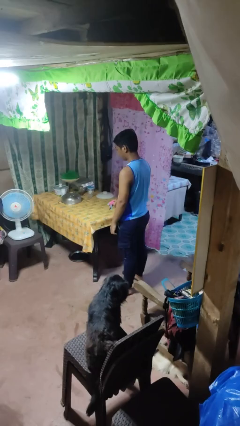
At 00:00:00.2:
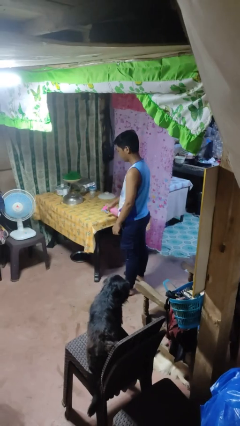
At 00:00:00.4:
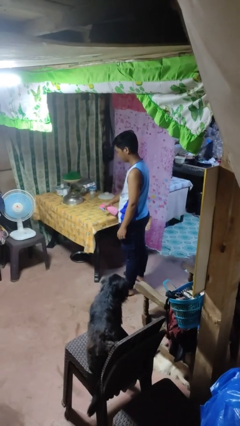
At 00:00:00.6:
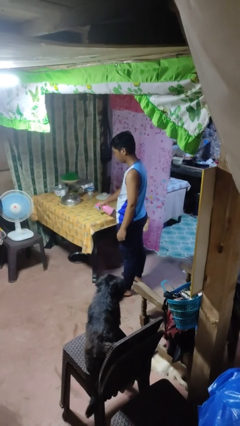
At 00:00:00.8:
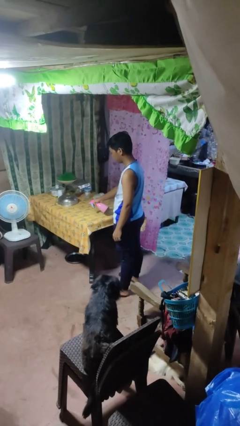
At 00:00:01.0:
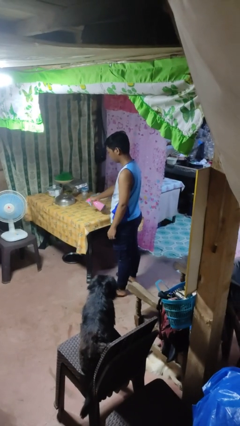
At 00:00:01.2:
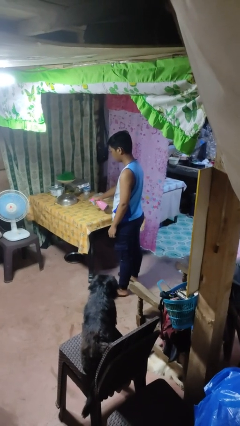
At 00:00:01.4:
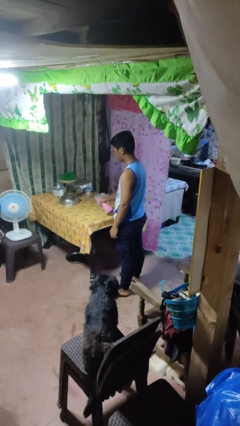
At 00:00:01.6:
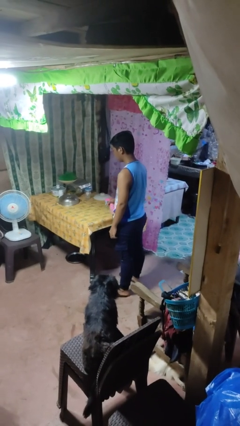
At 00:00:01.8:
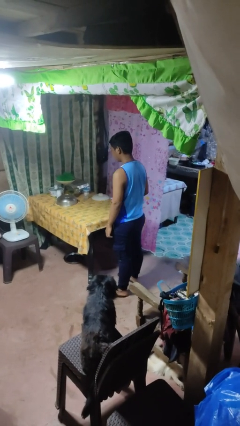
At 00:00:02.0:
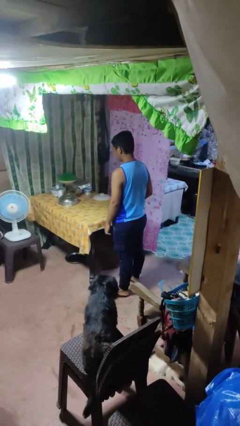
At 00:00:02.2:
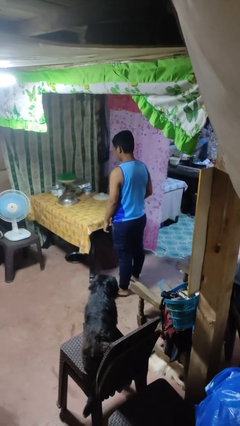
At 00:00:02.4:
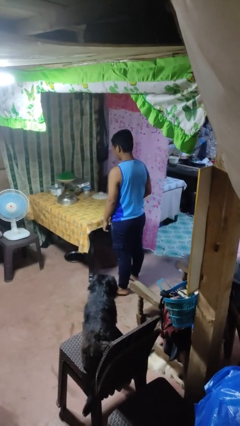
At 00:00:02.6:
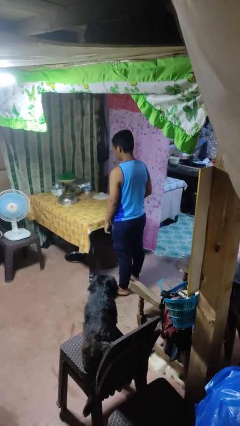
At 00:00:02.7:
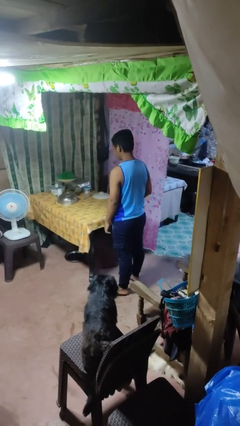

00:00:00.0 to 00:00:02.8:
person sprays from bottle

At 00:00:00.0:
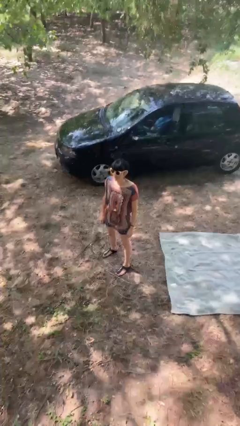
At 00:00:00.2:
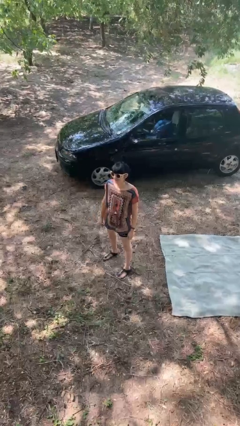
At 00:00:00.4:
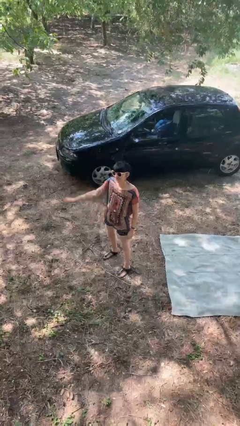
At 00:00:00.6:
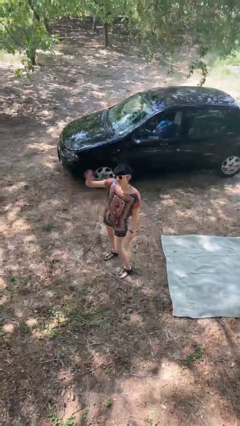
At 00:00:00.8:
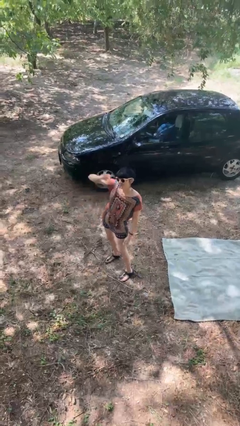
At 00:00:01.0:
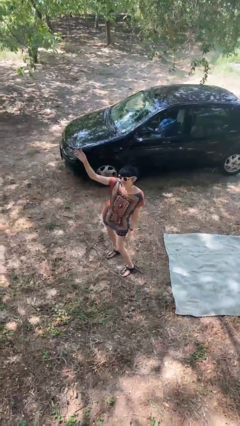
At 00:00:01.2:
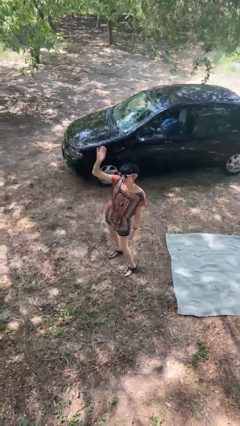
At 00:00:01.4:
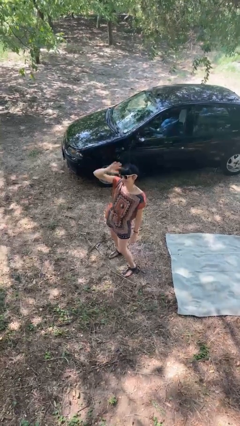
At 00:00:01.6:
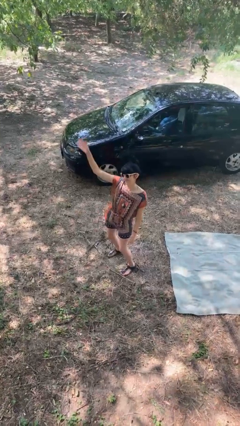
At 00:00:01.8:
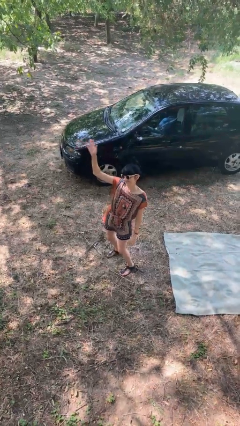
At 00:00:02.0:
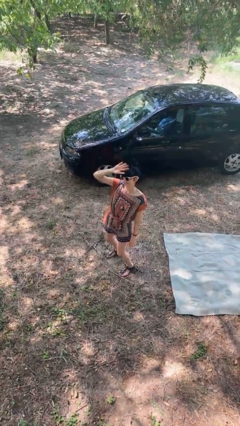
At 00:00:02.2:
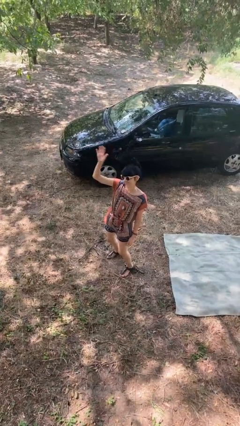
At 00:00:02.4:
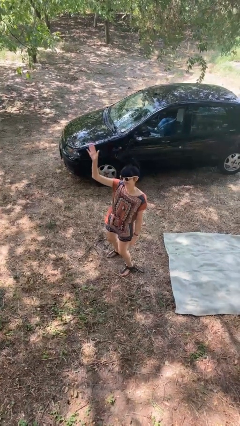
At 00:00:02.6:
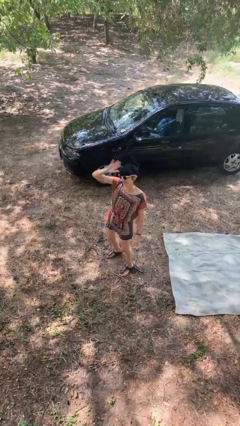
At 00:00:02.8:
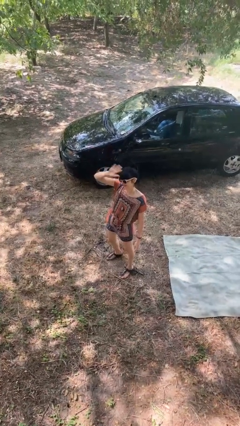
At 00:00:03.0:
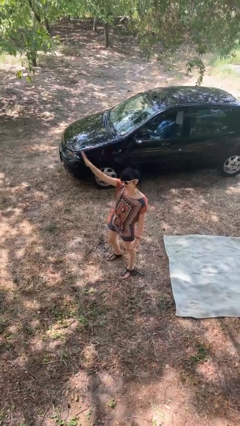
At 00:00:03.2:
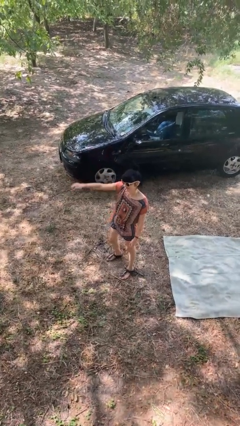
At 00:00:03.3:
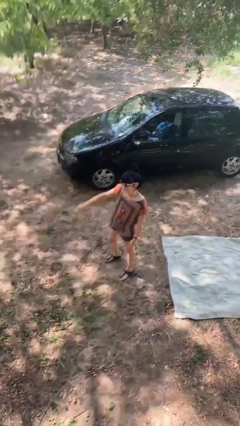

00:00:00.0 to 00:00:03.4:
person waves at person

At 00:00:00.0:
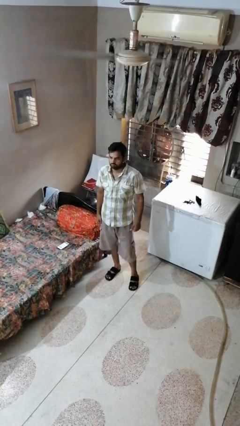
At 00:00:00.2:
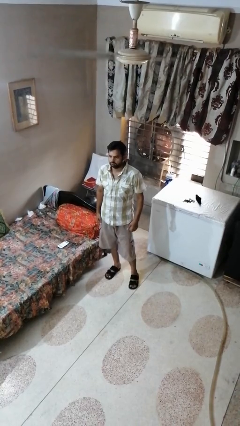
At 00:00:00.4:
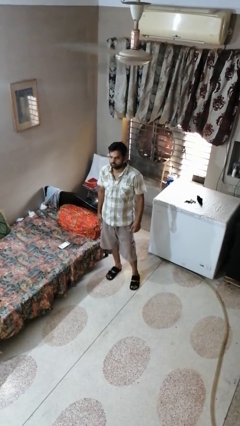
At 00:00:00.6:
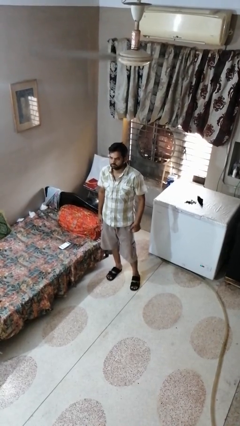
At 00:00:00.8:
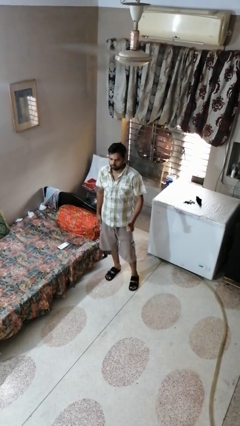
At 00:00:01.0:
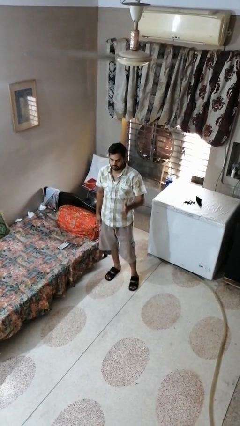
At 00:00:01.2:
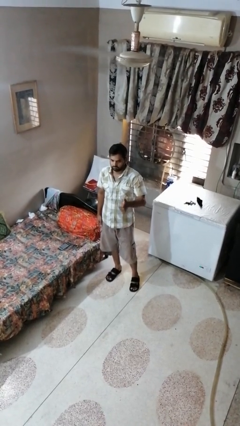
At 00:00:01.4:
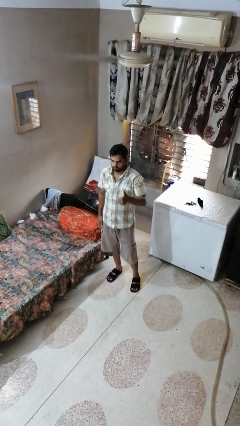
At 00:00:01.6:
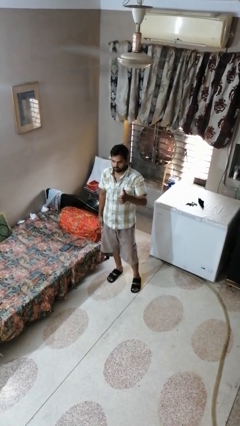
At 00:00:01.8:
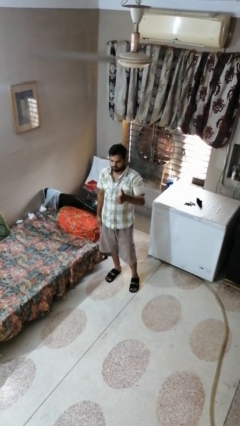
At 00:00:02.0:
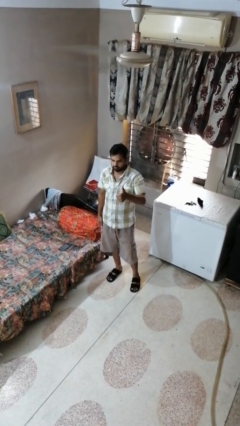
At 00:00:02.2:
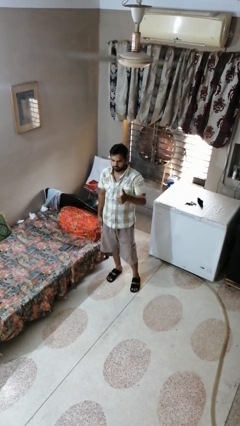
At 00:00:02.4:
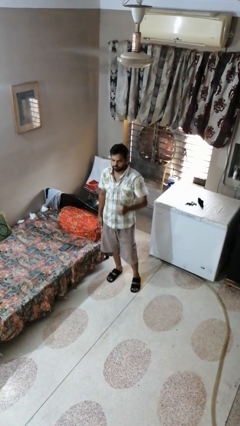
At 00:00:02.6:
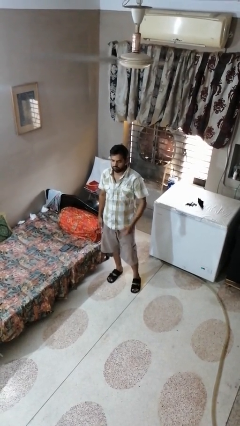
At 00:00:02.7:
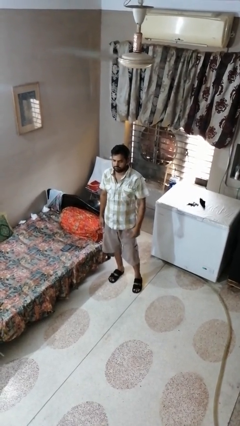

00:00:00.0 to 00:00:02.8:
person gestures thumbs up

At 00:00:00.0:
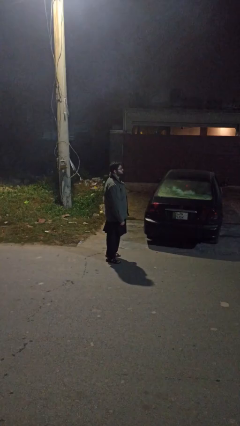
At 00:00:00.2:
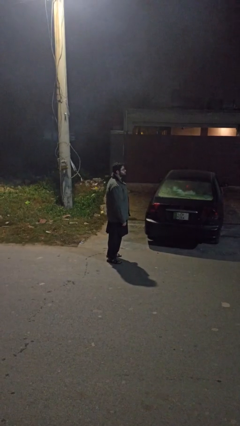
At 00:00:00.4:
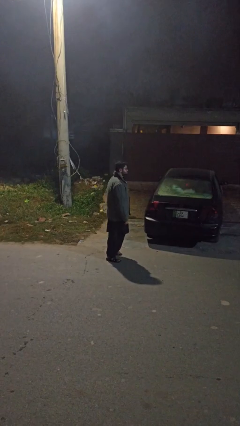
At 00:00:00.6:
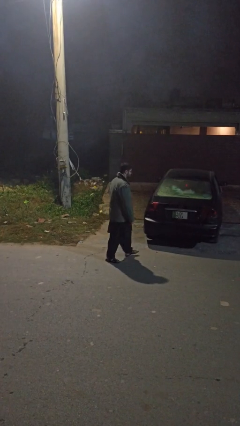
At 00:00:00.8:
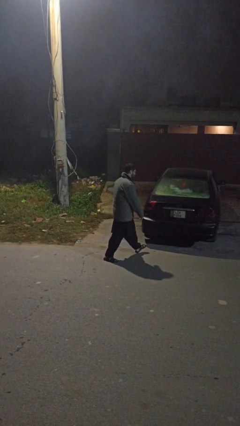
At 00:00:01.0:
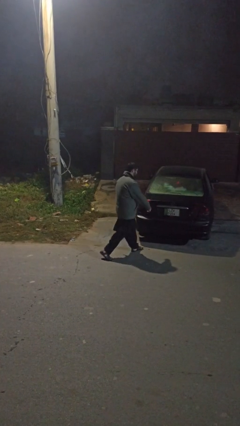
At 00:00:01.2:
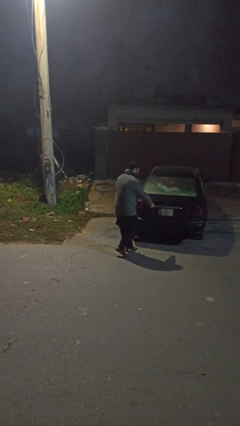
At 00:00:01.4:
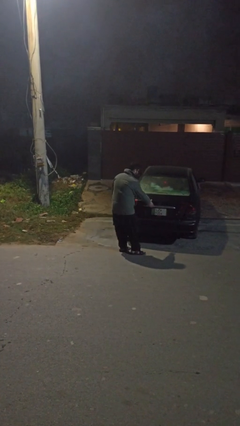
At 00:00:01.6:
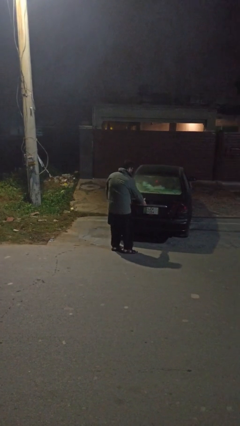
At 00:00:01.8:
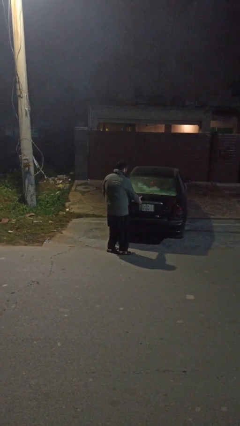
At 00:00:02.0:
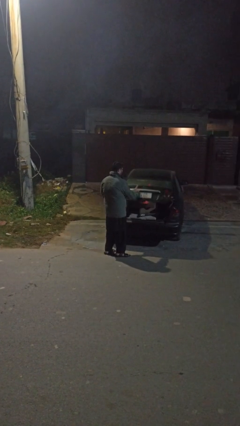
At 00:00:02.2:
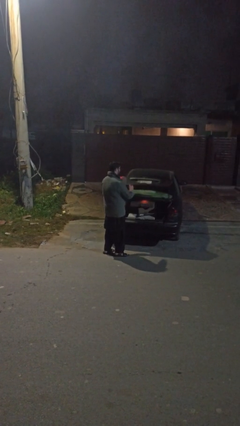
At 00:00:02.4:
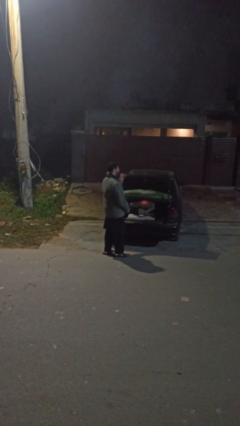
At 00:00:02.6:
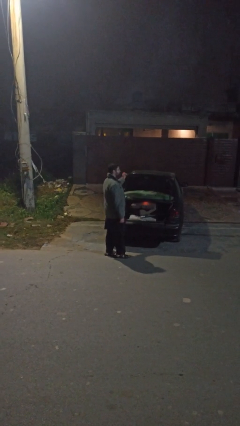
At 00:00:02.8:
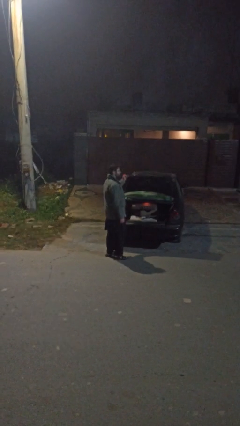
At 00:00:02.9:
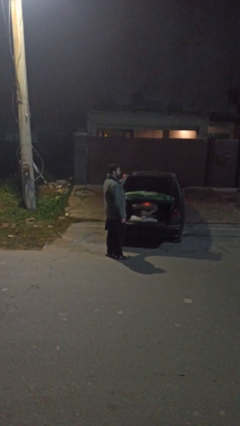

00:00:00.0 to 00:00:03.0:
person opens car trunk

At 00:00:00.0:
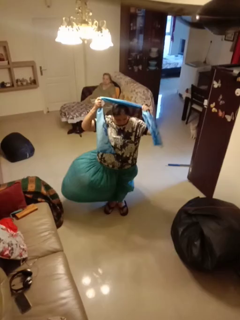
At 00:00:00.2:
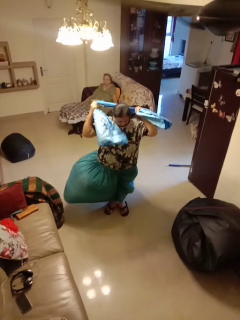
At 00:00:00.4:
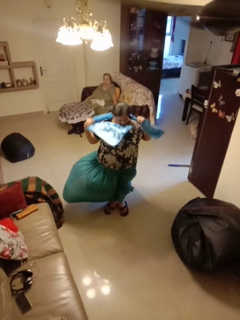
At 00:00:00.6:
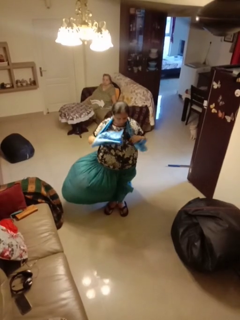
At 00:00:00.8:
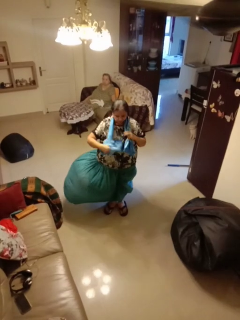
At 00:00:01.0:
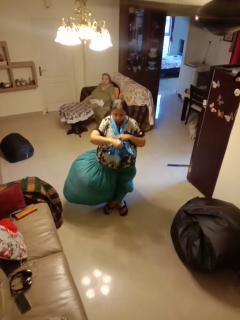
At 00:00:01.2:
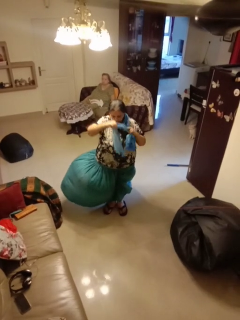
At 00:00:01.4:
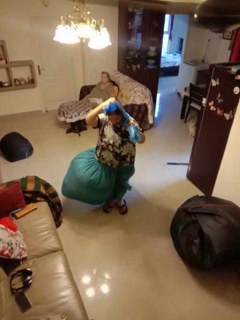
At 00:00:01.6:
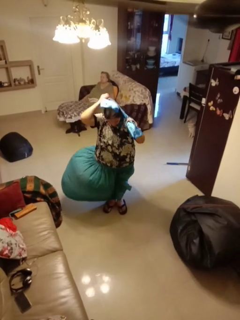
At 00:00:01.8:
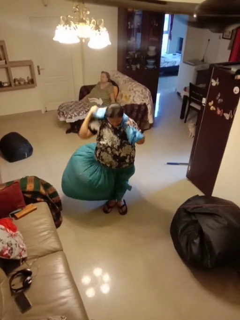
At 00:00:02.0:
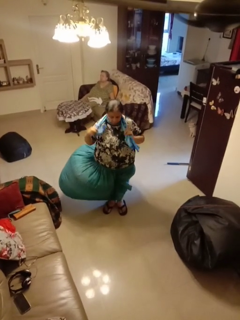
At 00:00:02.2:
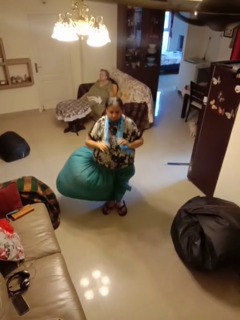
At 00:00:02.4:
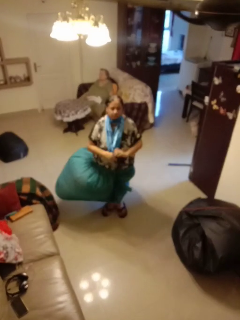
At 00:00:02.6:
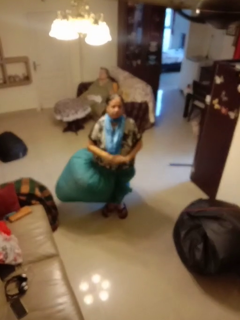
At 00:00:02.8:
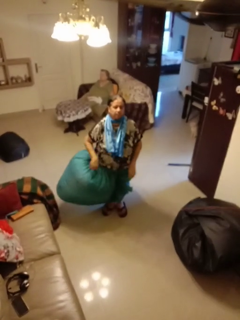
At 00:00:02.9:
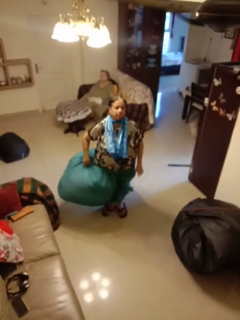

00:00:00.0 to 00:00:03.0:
person puts on scarf

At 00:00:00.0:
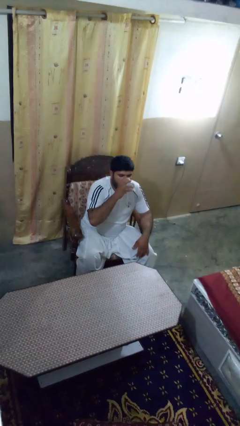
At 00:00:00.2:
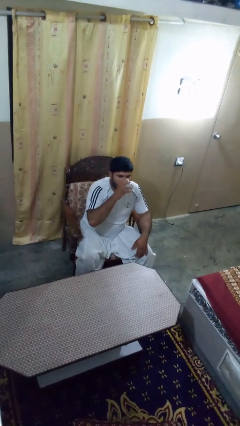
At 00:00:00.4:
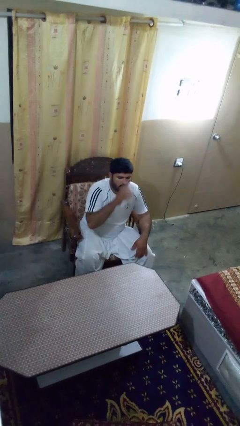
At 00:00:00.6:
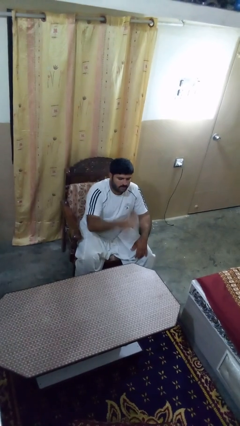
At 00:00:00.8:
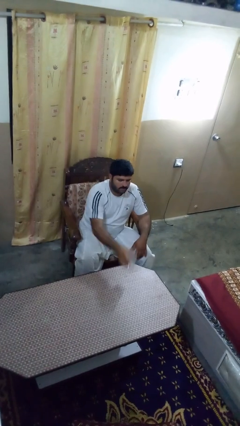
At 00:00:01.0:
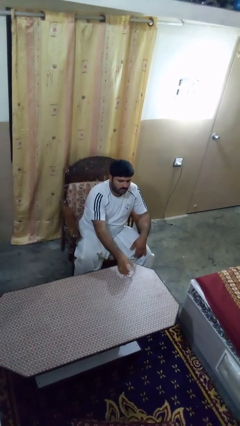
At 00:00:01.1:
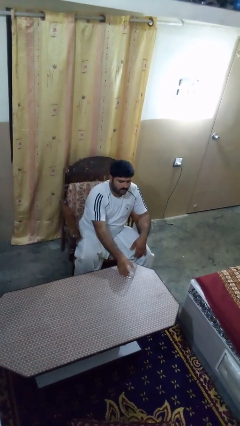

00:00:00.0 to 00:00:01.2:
person puts down object on table

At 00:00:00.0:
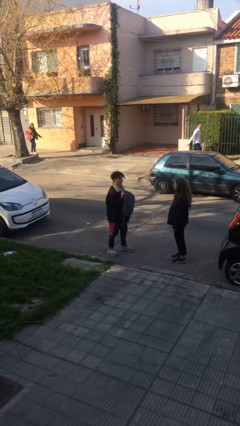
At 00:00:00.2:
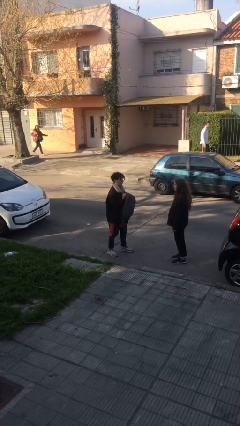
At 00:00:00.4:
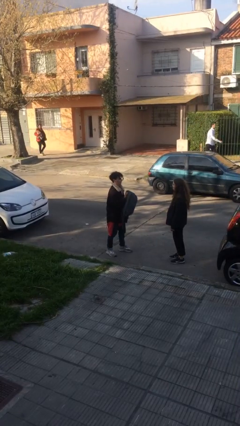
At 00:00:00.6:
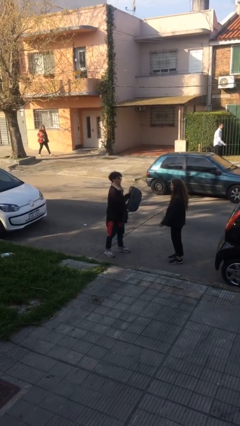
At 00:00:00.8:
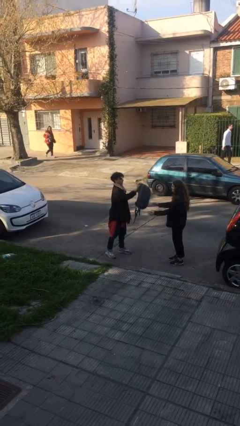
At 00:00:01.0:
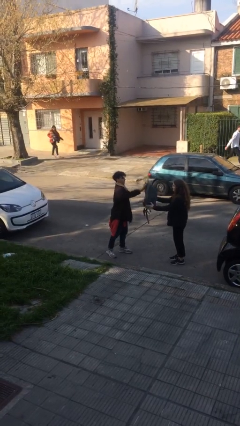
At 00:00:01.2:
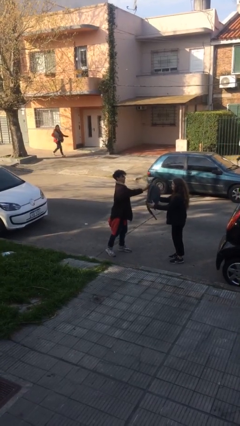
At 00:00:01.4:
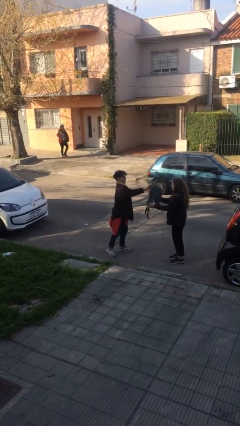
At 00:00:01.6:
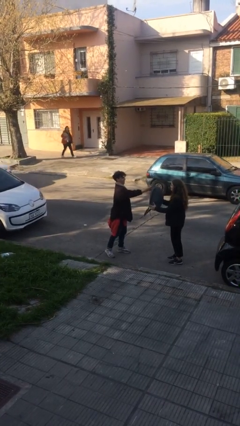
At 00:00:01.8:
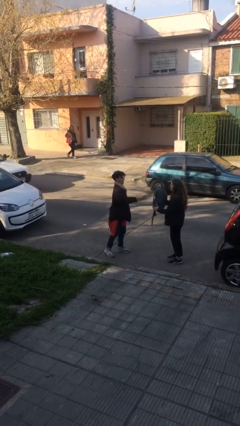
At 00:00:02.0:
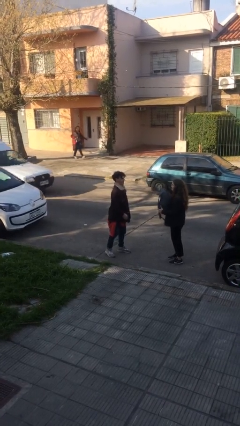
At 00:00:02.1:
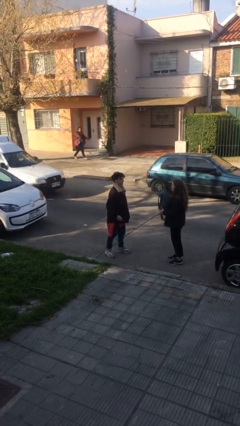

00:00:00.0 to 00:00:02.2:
person transfers object to person
